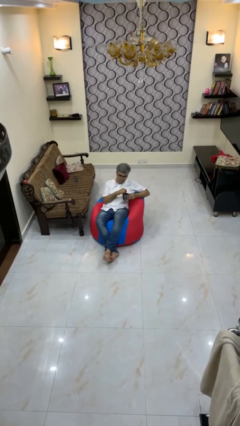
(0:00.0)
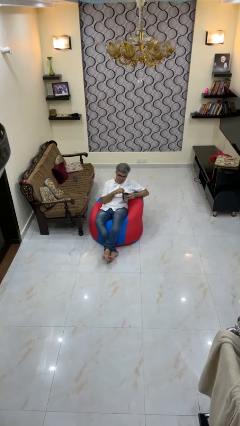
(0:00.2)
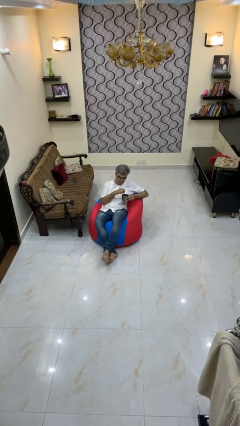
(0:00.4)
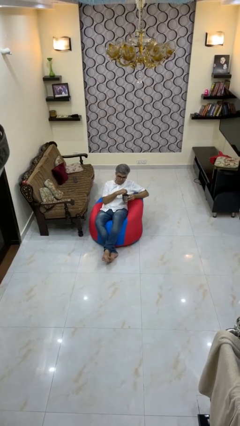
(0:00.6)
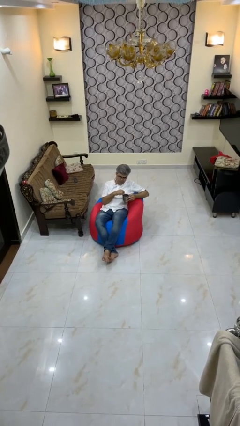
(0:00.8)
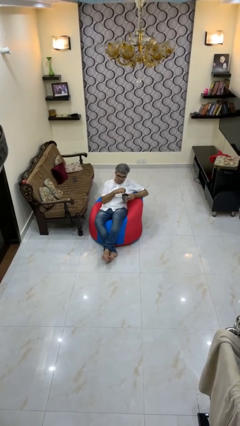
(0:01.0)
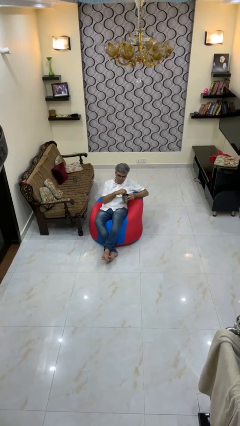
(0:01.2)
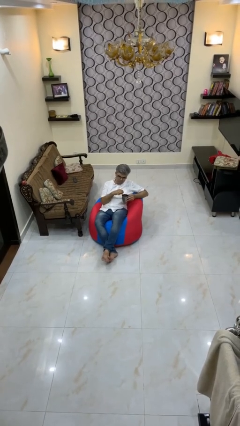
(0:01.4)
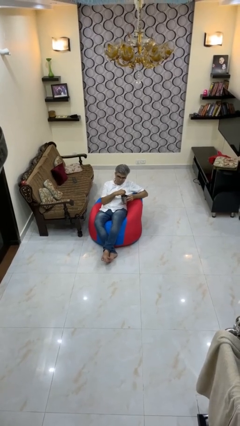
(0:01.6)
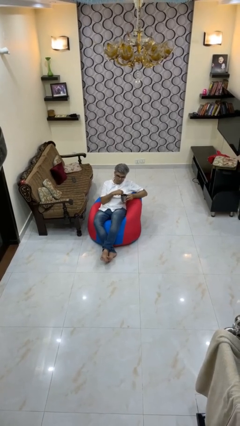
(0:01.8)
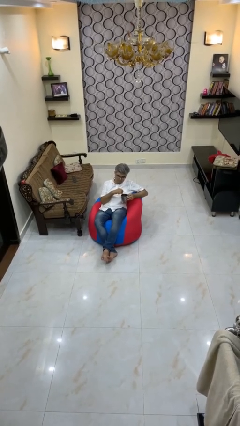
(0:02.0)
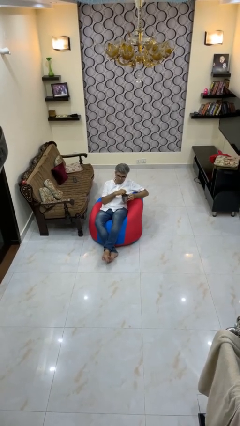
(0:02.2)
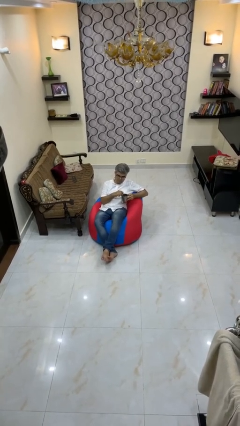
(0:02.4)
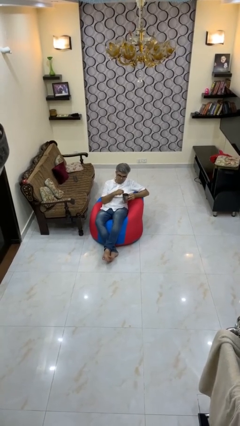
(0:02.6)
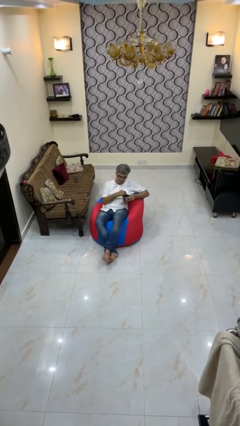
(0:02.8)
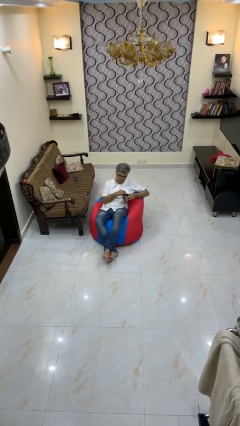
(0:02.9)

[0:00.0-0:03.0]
person stirs mug

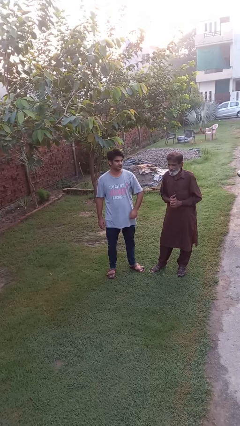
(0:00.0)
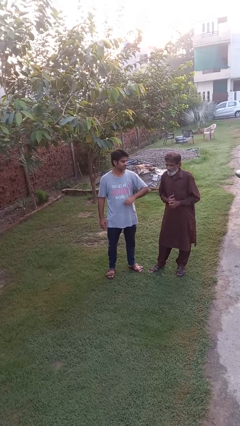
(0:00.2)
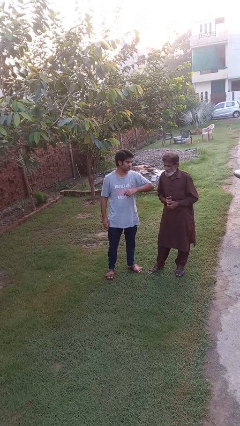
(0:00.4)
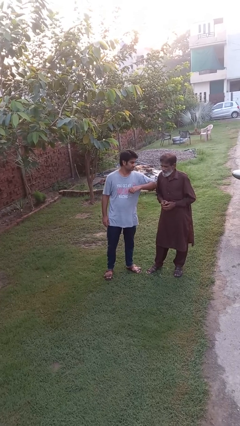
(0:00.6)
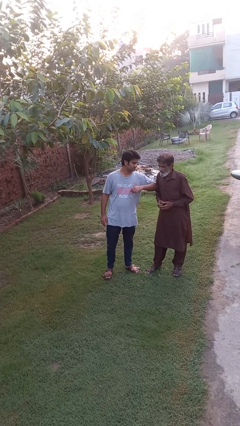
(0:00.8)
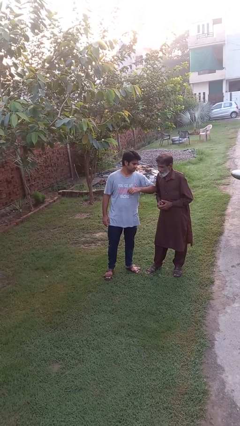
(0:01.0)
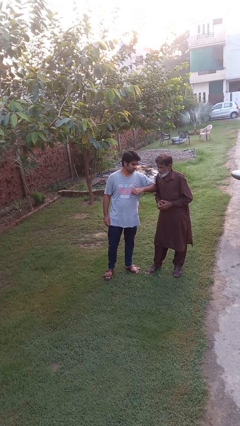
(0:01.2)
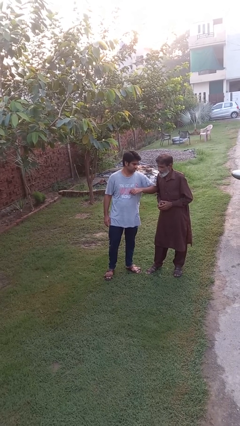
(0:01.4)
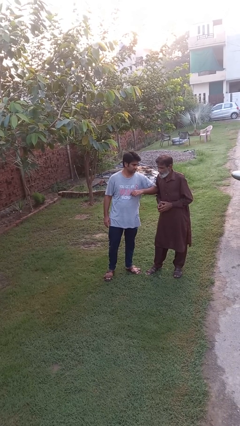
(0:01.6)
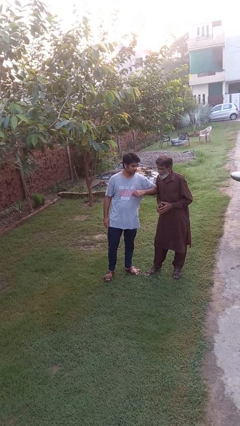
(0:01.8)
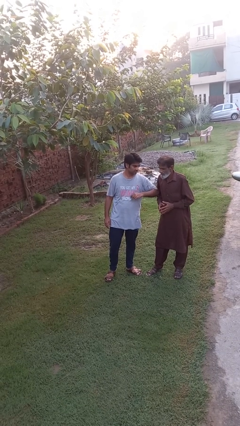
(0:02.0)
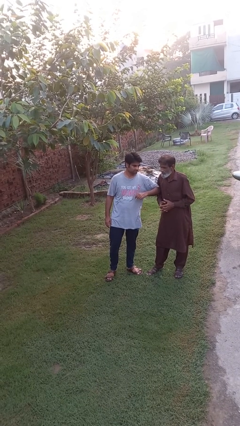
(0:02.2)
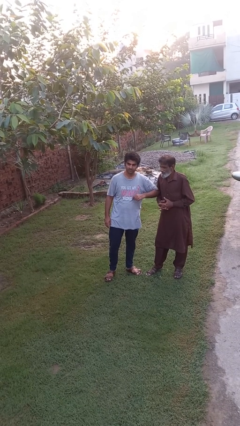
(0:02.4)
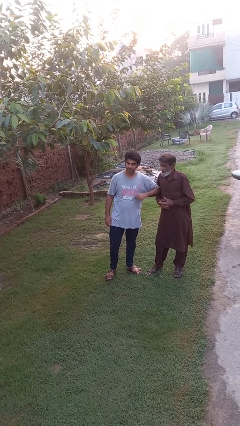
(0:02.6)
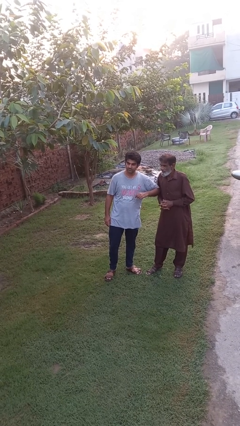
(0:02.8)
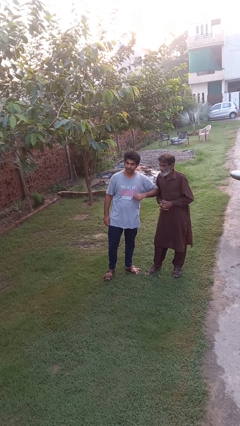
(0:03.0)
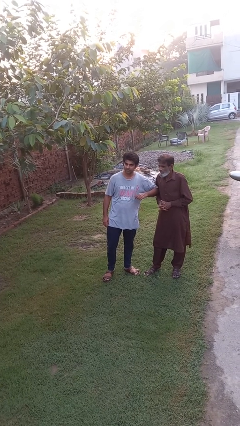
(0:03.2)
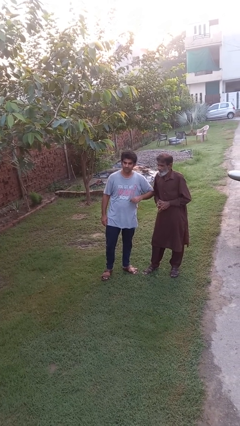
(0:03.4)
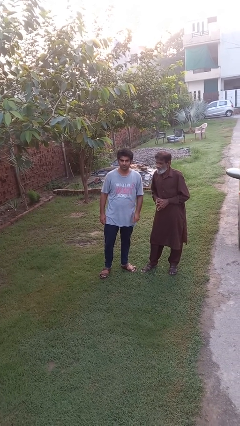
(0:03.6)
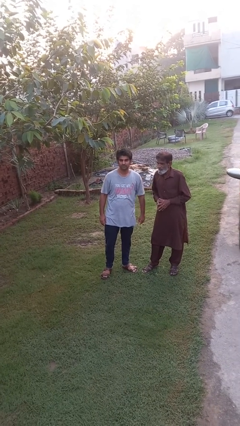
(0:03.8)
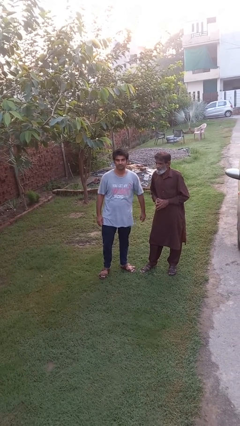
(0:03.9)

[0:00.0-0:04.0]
person nudges person with elbow

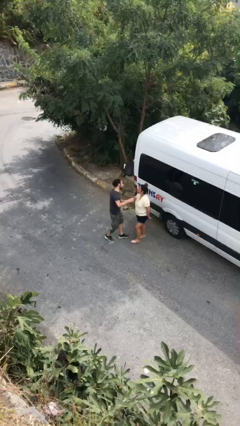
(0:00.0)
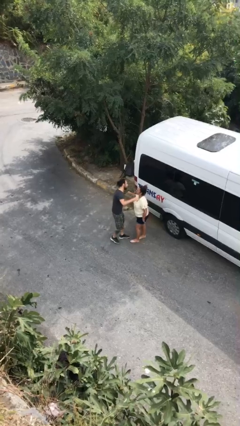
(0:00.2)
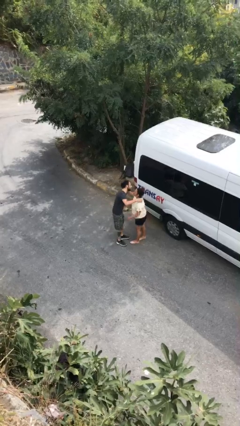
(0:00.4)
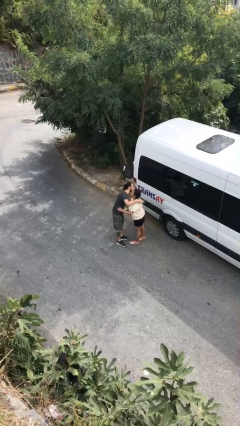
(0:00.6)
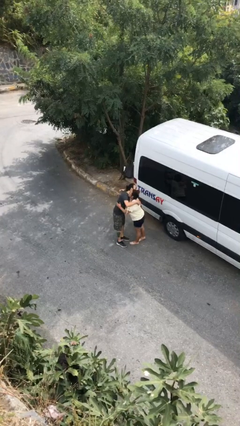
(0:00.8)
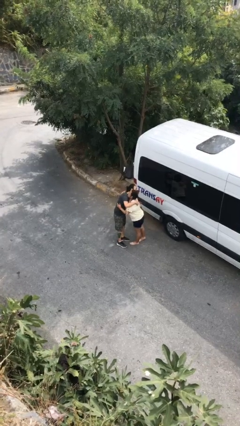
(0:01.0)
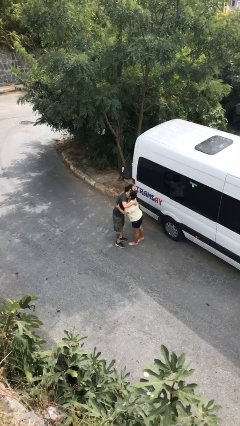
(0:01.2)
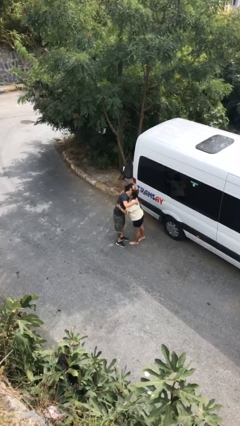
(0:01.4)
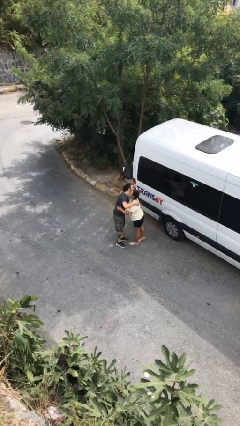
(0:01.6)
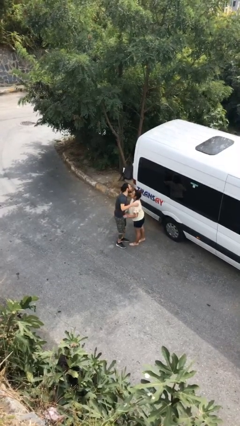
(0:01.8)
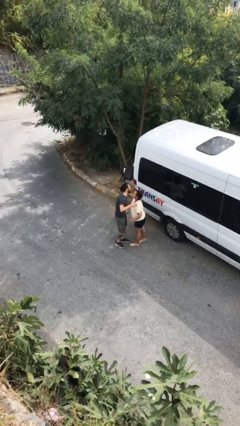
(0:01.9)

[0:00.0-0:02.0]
person embraces person

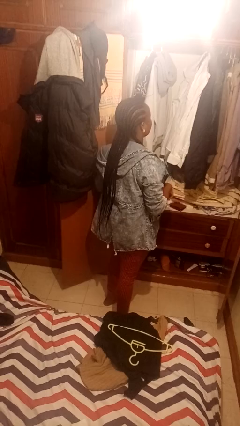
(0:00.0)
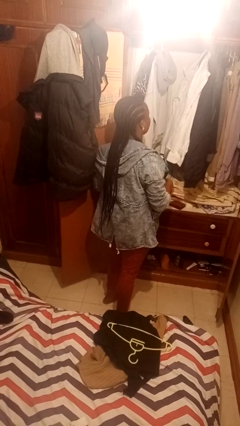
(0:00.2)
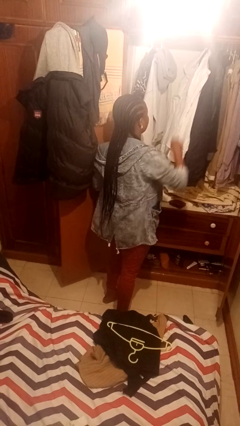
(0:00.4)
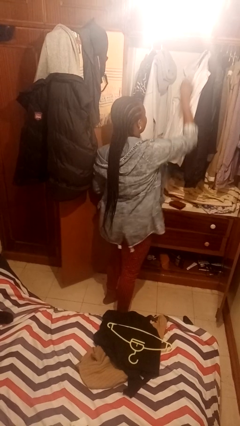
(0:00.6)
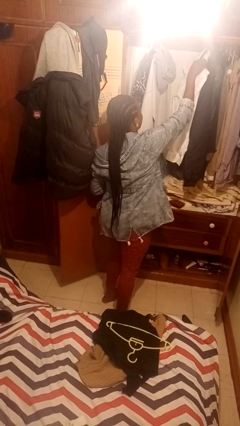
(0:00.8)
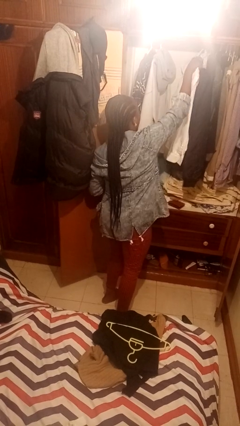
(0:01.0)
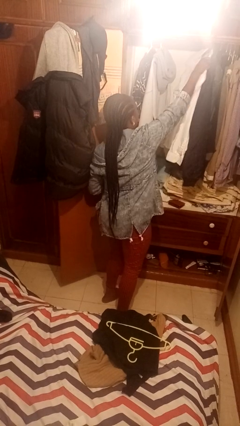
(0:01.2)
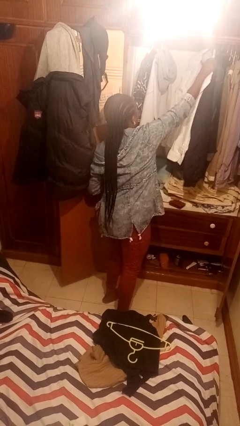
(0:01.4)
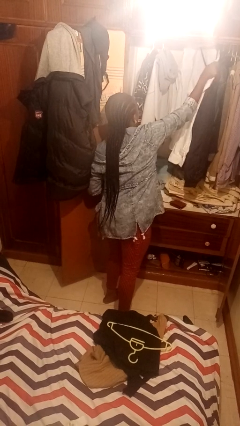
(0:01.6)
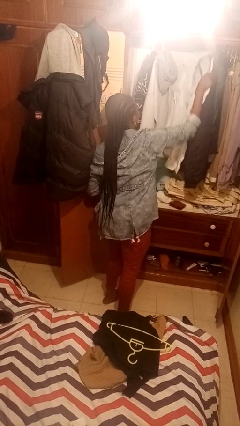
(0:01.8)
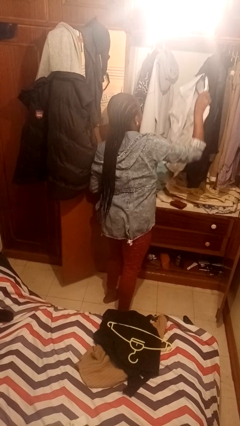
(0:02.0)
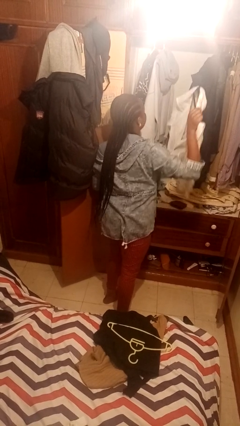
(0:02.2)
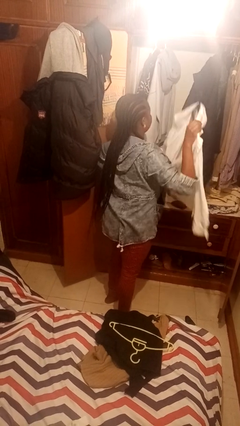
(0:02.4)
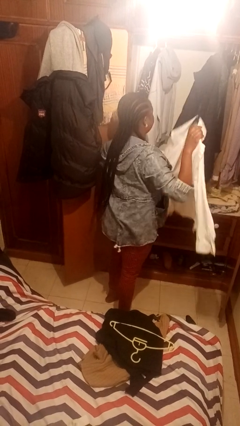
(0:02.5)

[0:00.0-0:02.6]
person takes clothes from closet

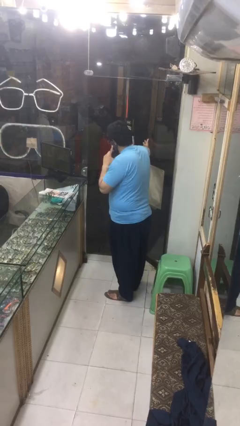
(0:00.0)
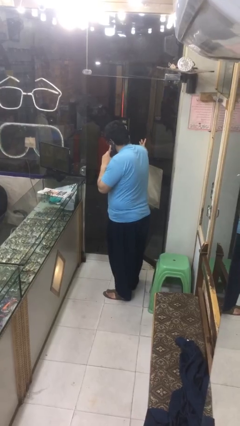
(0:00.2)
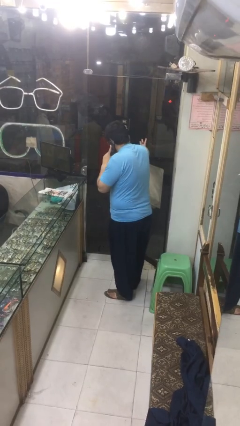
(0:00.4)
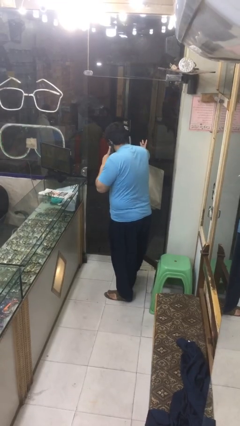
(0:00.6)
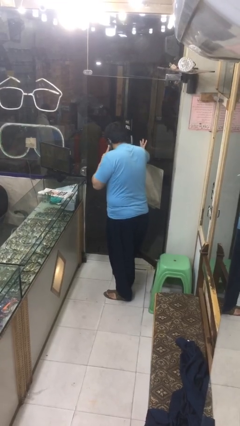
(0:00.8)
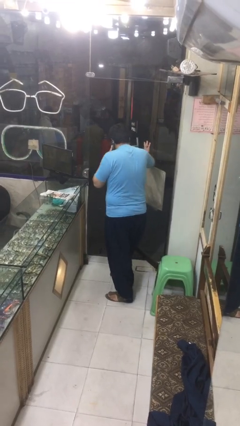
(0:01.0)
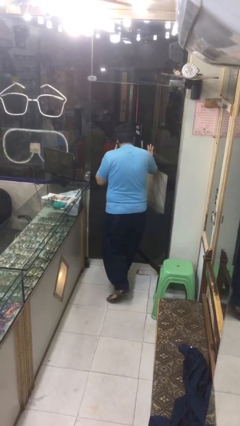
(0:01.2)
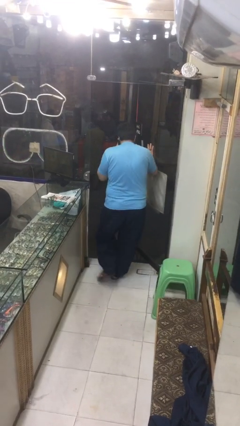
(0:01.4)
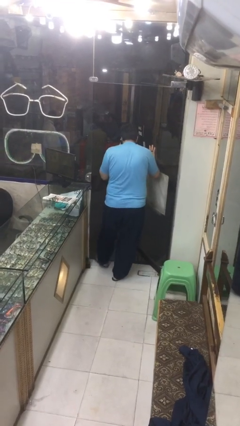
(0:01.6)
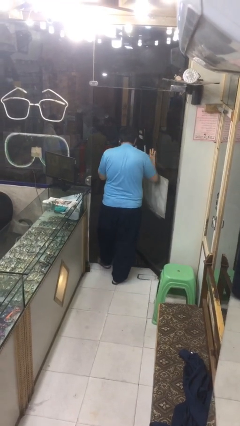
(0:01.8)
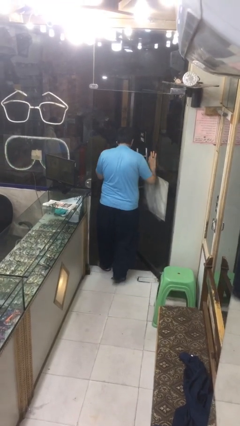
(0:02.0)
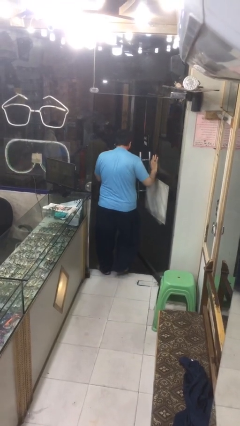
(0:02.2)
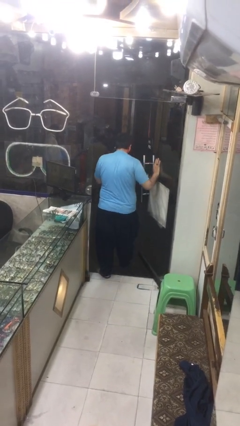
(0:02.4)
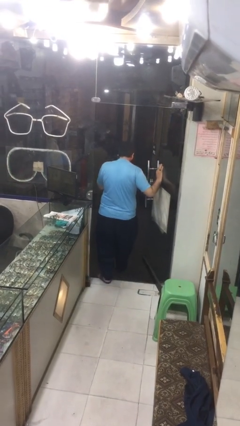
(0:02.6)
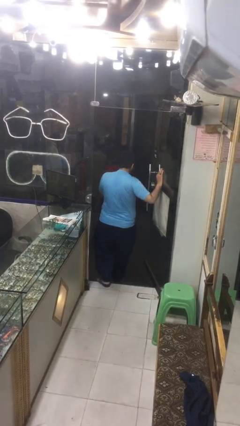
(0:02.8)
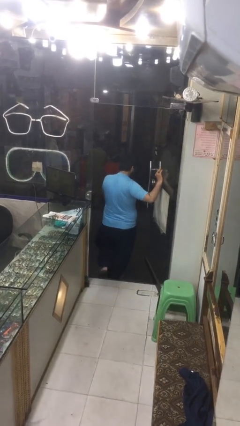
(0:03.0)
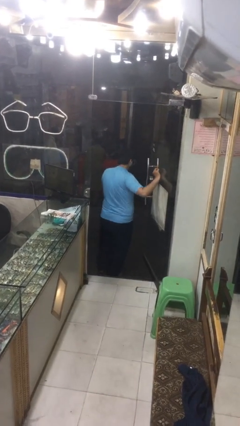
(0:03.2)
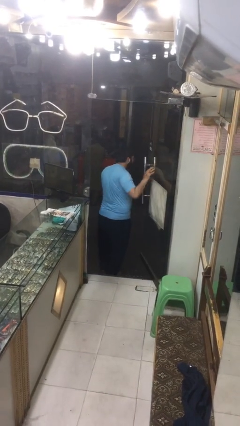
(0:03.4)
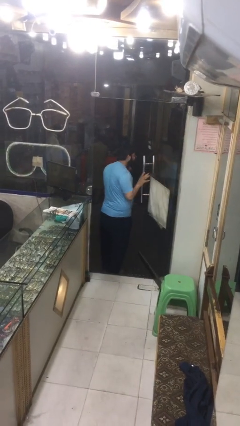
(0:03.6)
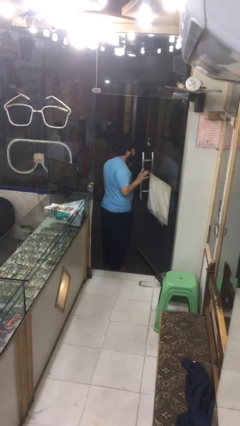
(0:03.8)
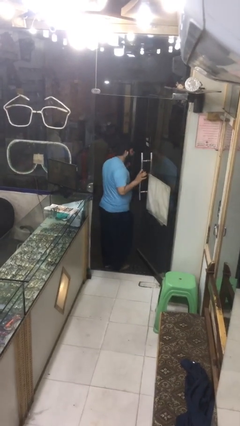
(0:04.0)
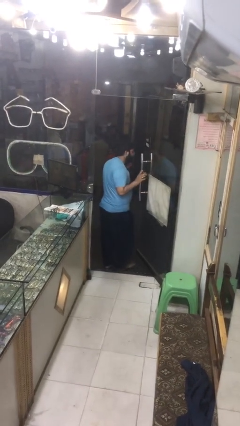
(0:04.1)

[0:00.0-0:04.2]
person exits scene through structure

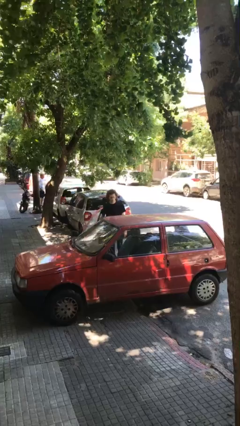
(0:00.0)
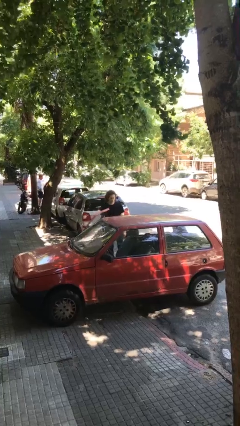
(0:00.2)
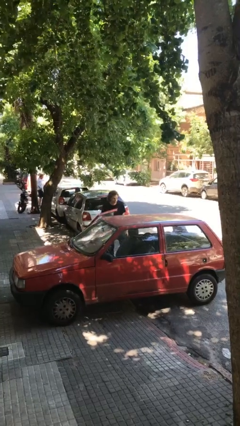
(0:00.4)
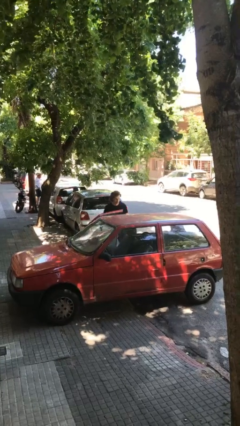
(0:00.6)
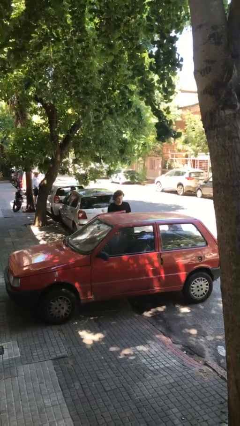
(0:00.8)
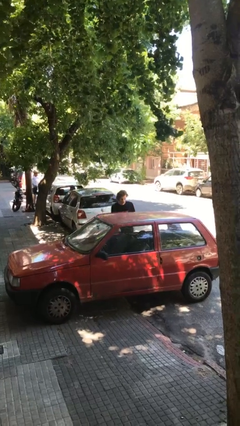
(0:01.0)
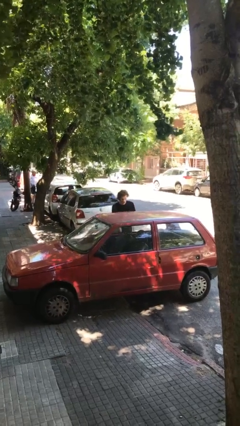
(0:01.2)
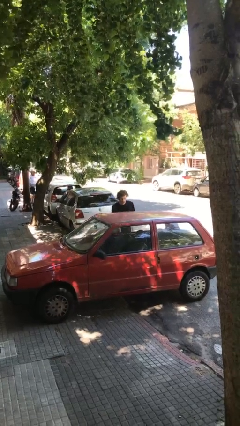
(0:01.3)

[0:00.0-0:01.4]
person closes car door

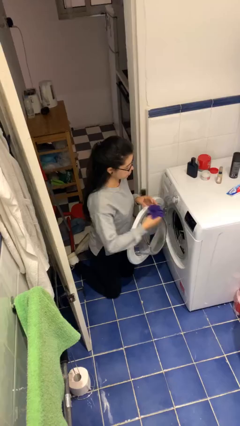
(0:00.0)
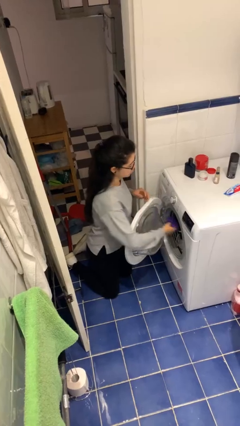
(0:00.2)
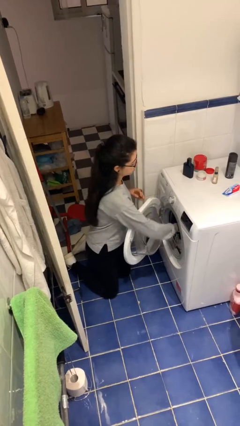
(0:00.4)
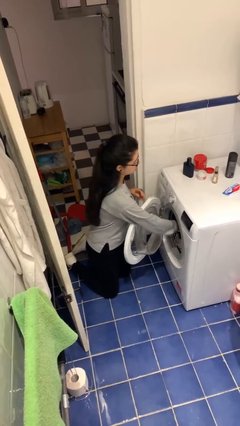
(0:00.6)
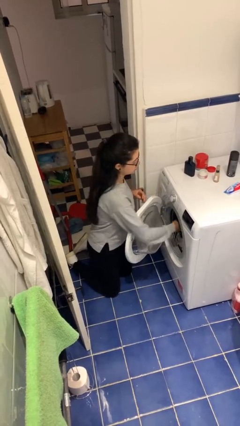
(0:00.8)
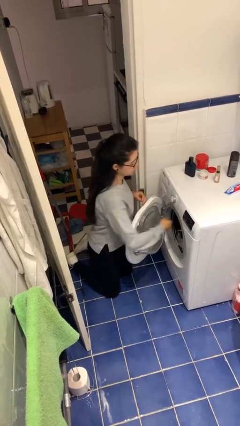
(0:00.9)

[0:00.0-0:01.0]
person loads clotheswasher
